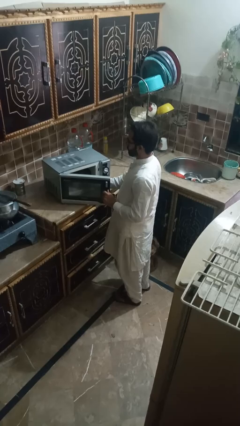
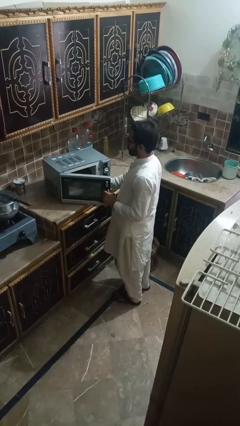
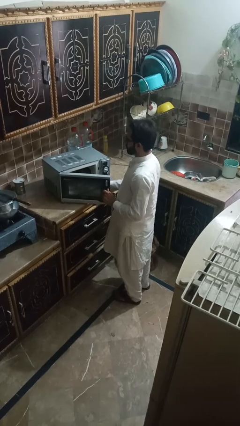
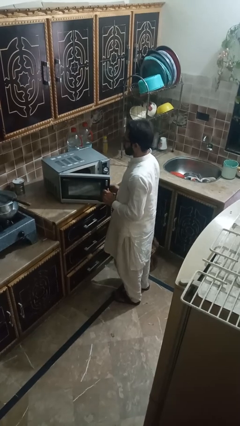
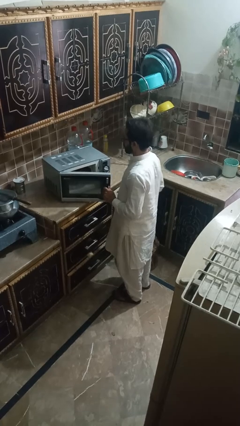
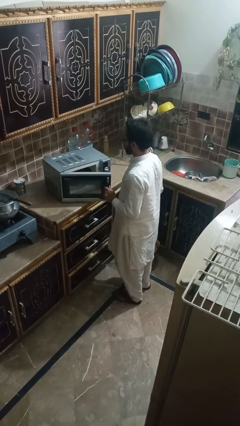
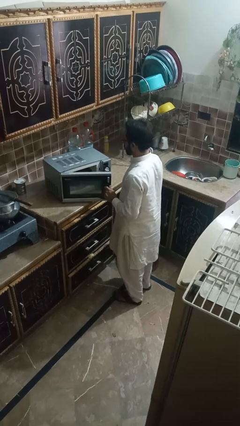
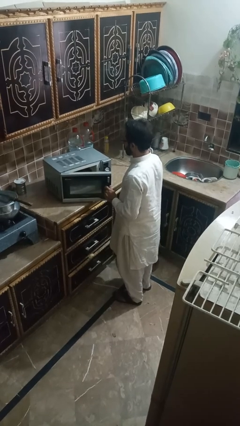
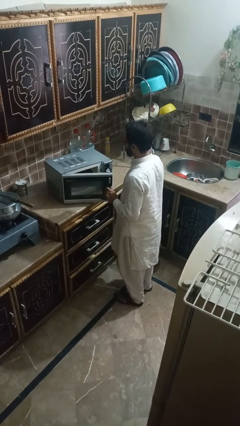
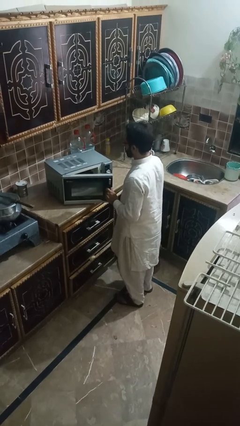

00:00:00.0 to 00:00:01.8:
person takes object from microwave

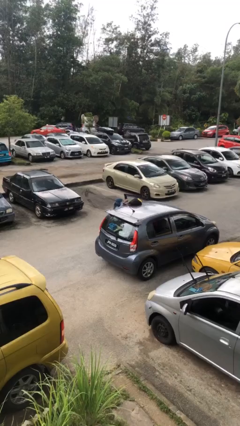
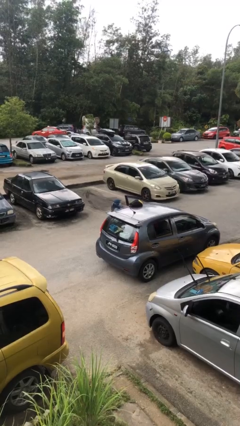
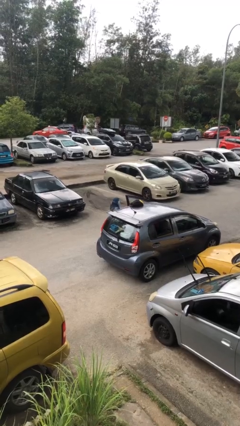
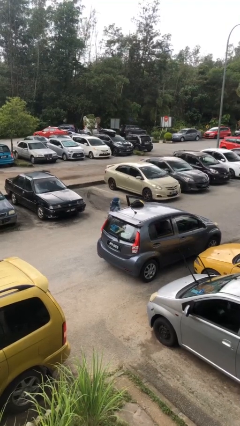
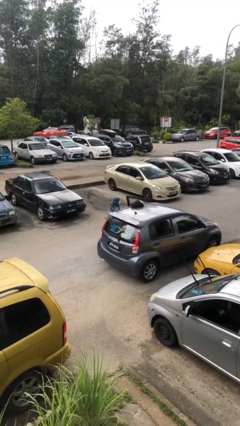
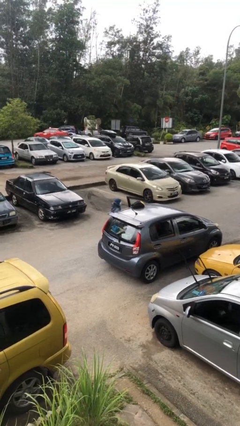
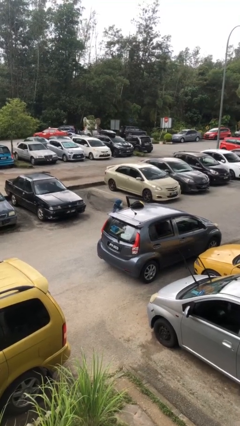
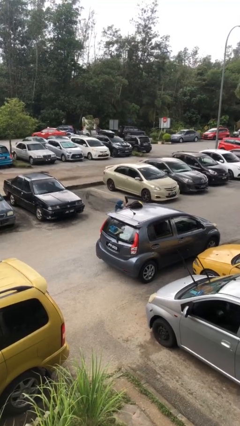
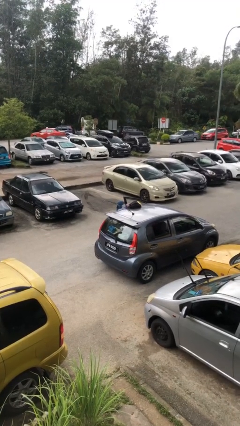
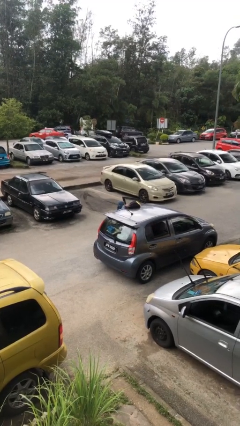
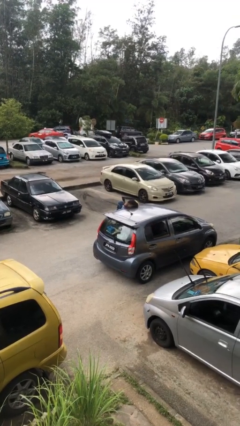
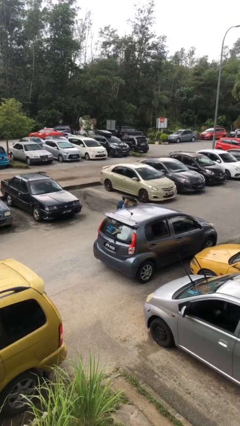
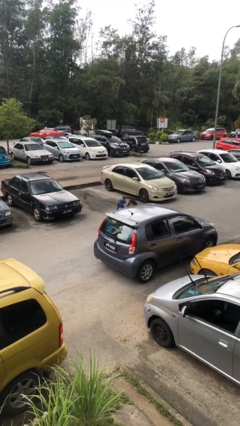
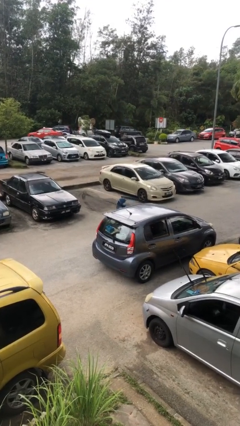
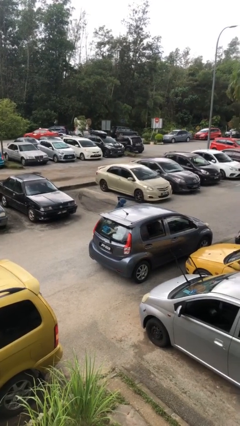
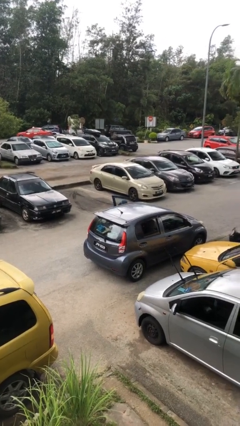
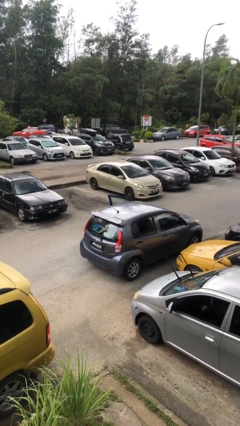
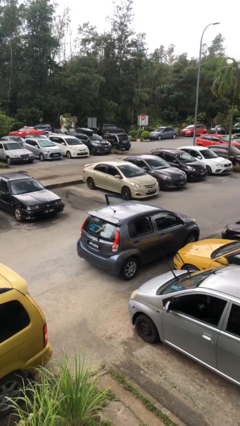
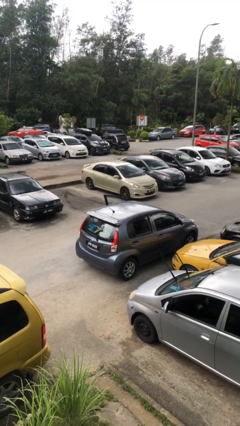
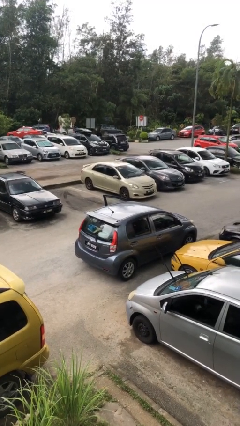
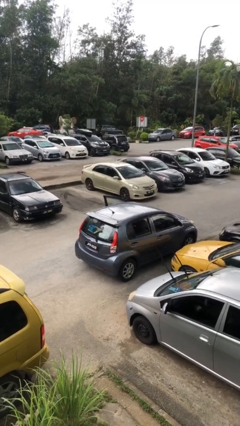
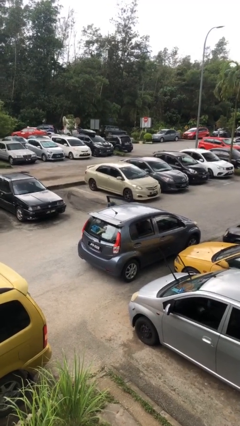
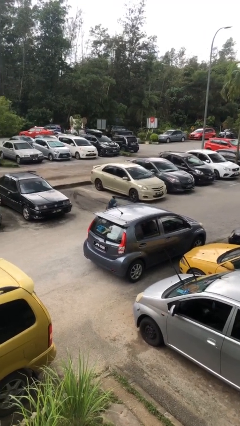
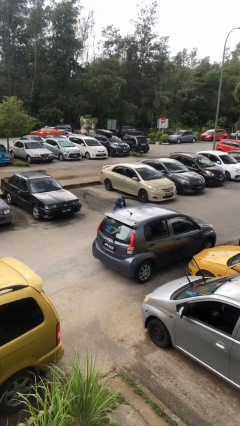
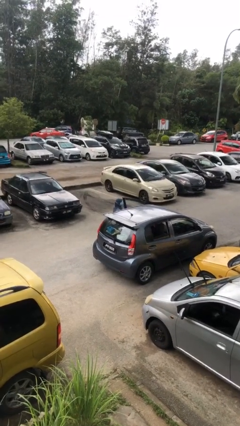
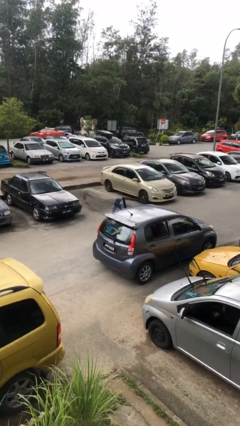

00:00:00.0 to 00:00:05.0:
person loads car

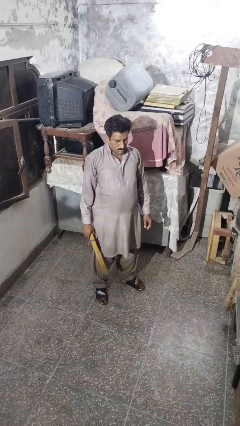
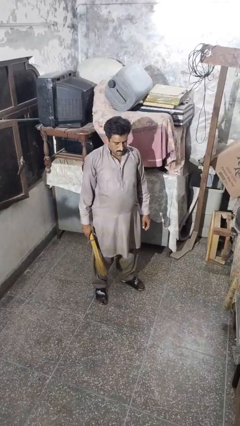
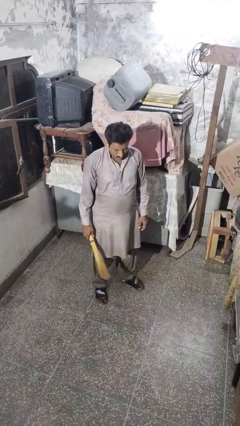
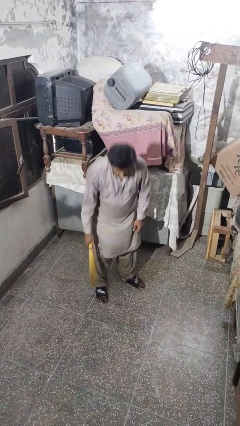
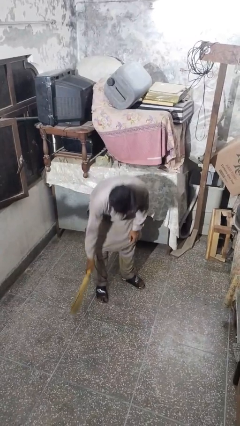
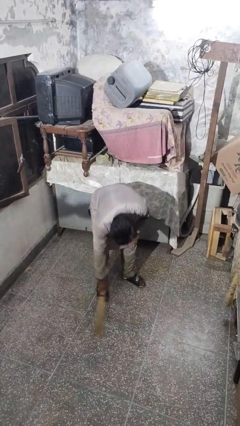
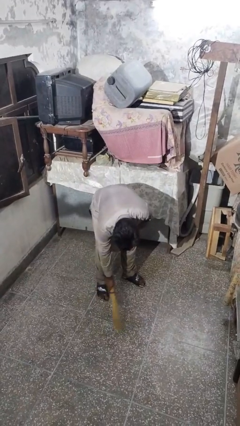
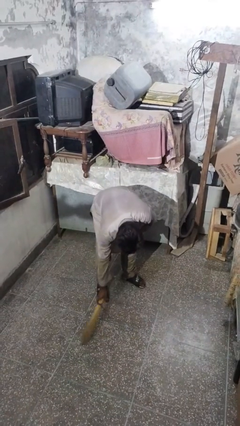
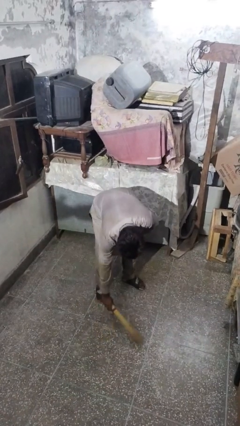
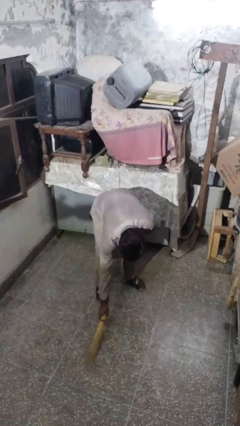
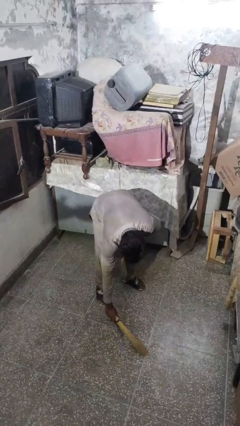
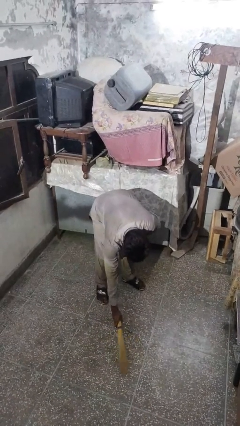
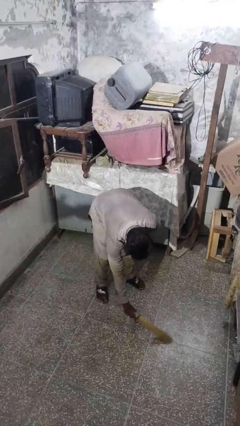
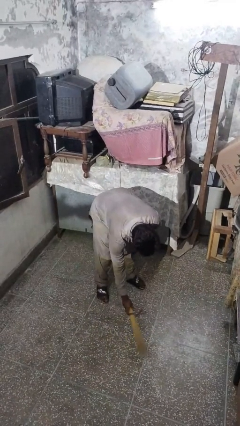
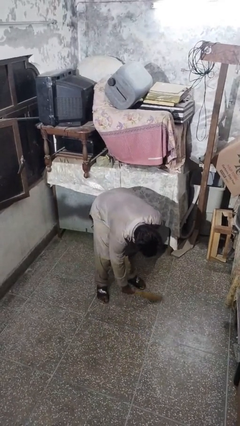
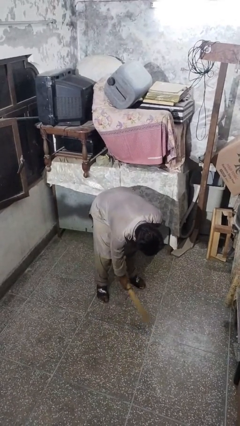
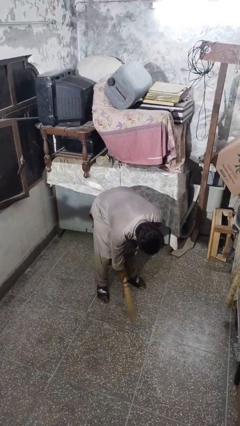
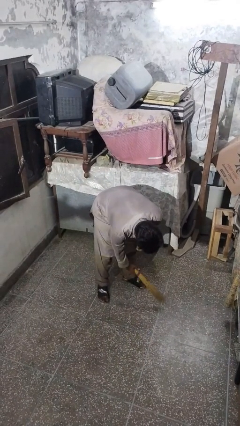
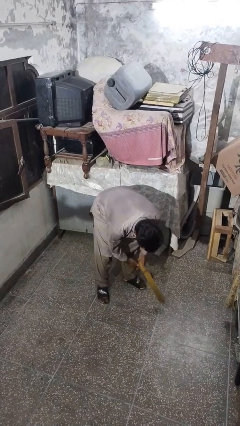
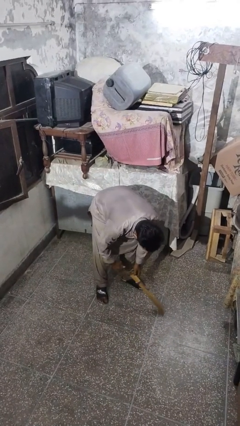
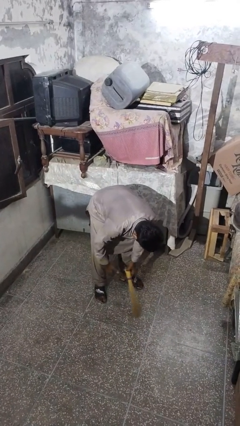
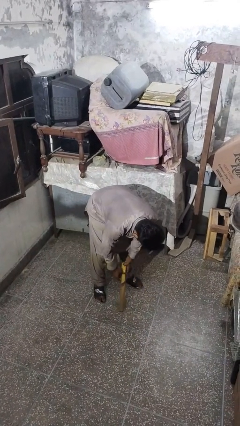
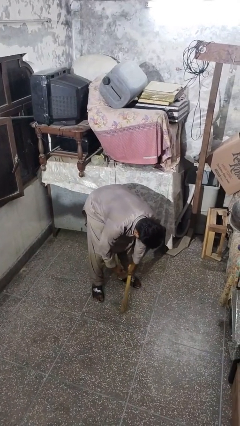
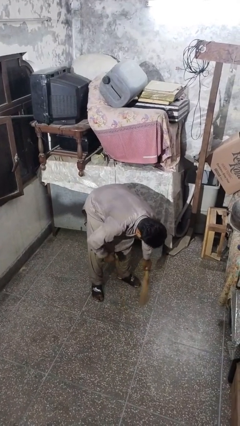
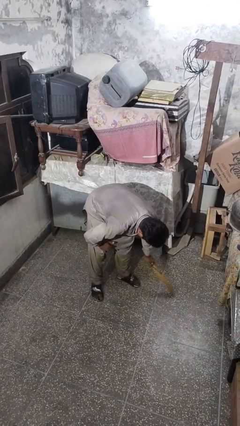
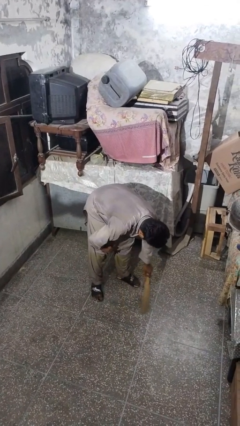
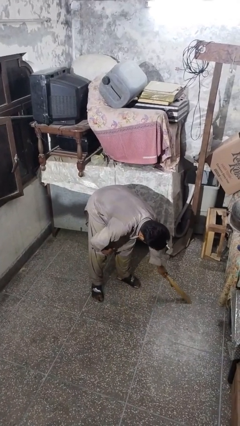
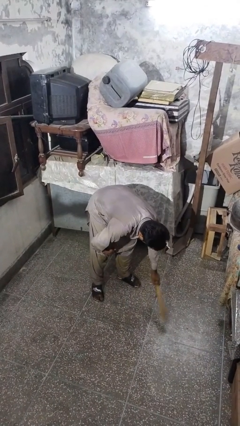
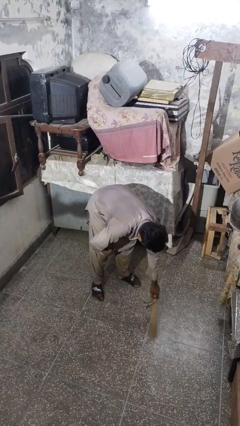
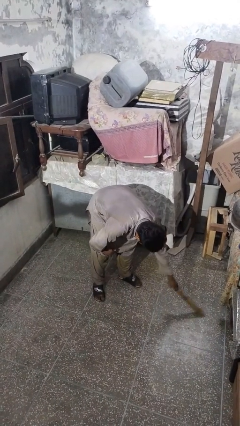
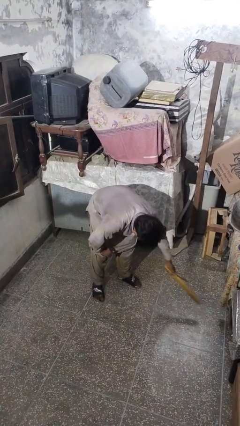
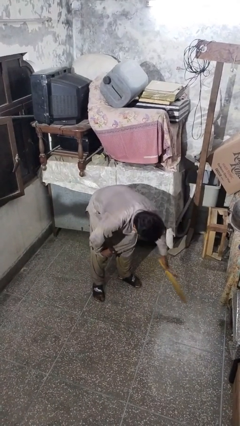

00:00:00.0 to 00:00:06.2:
person sweeps floor

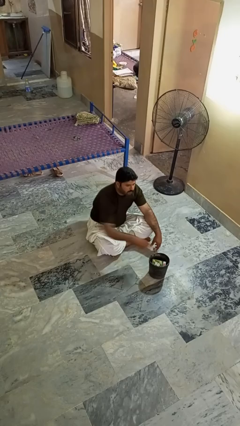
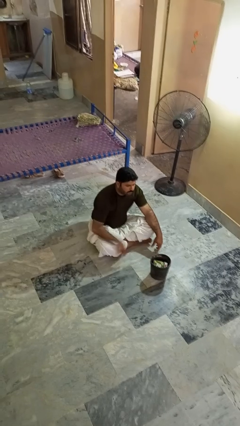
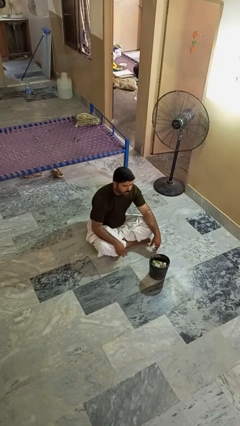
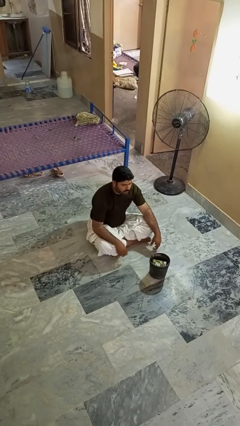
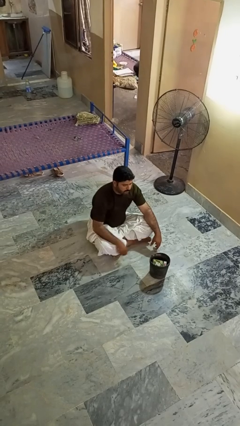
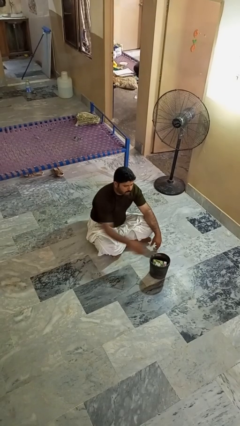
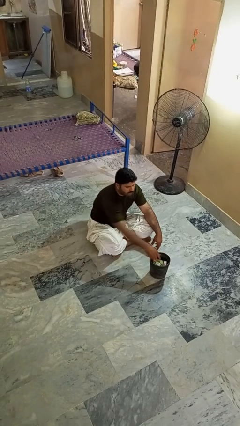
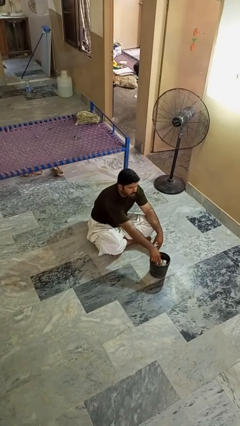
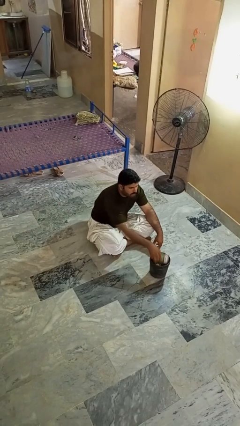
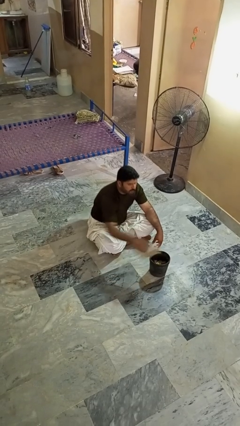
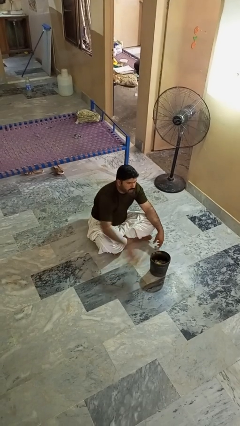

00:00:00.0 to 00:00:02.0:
person takes object from basket

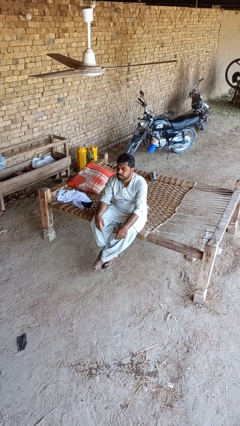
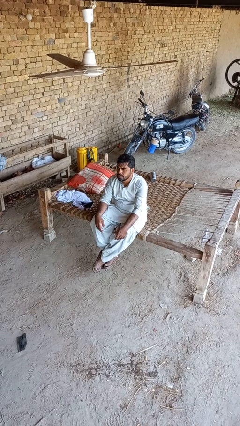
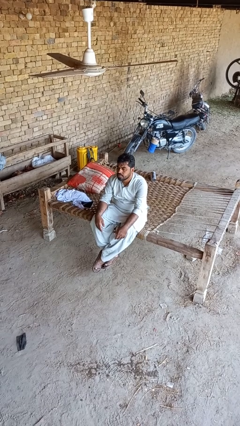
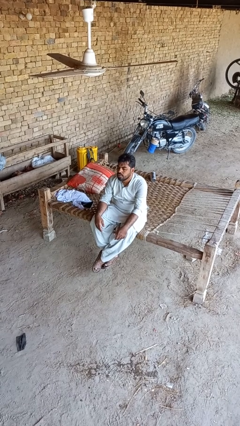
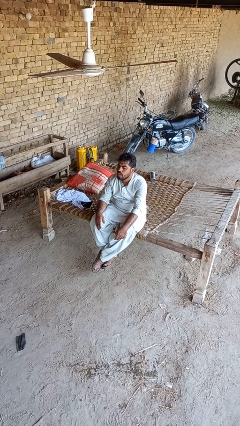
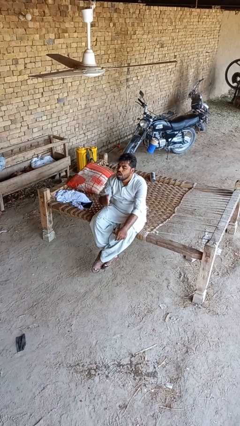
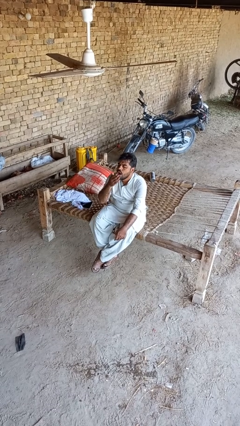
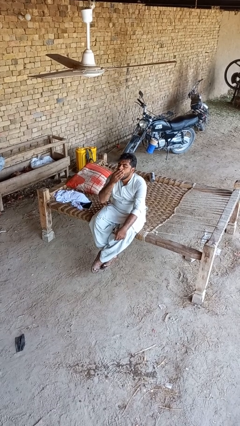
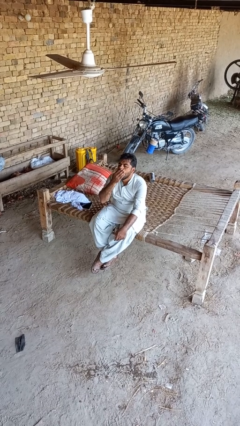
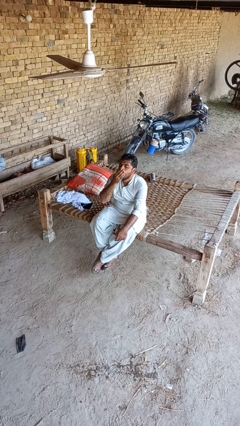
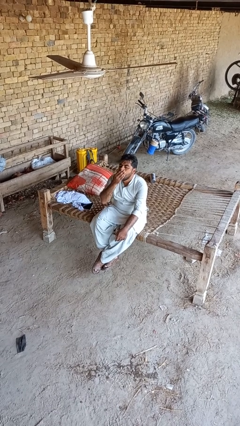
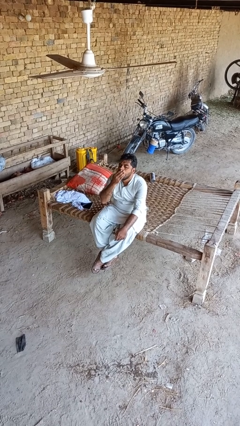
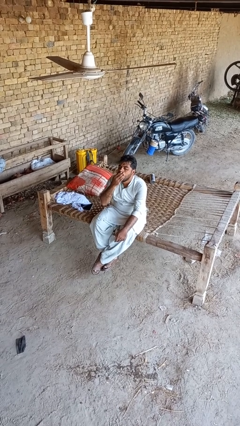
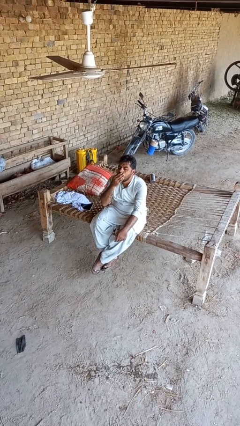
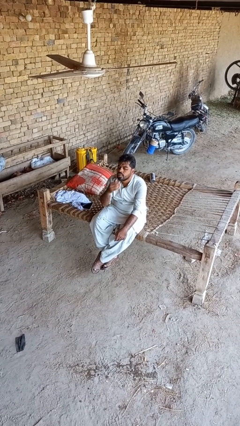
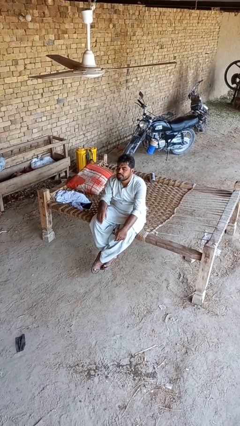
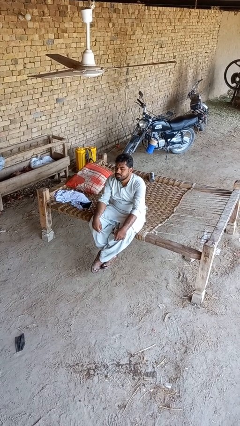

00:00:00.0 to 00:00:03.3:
person yawns
